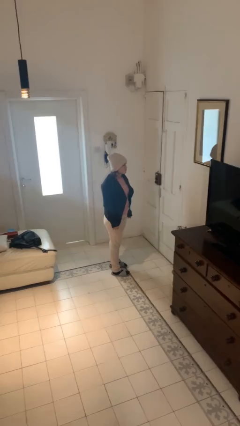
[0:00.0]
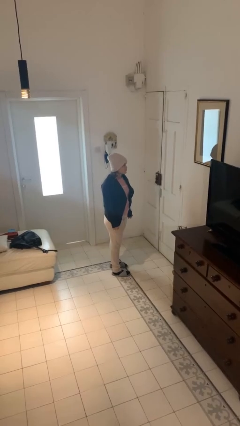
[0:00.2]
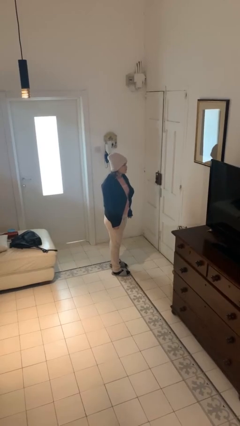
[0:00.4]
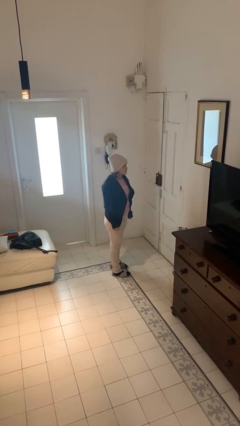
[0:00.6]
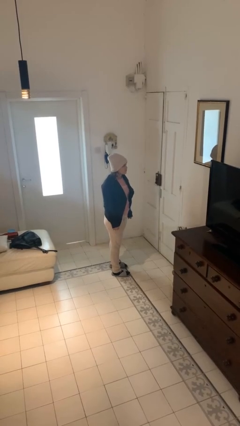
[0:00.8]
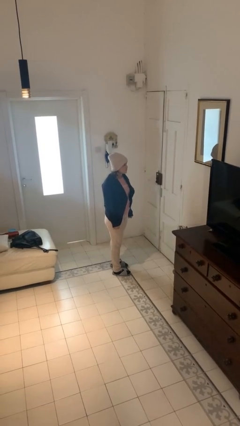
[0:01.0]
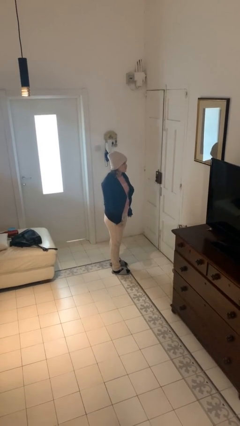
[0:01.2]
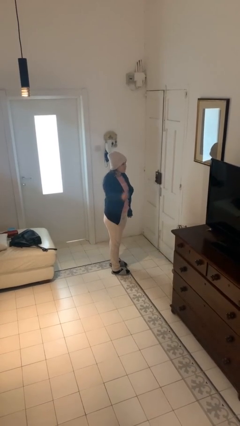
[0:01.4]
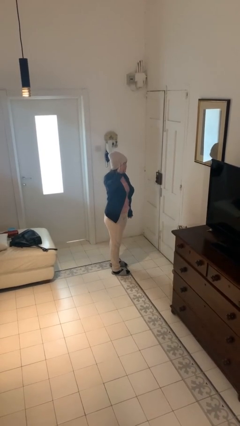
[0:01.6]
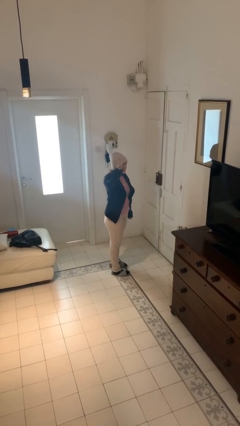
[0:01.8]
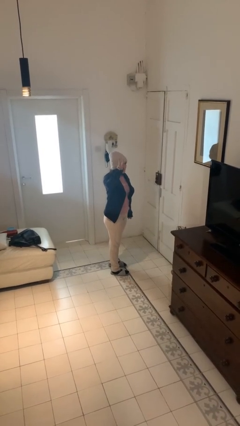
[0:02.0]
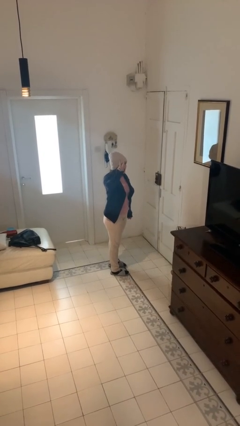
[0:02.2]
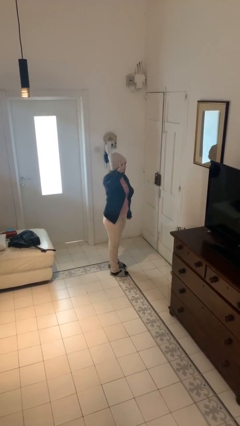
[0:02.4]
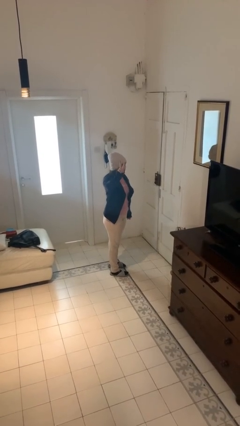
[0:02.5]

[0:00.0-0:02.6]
person gestures peace

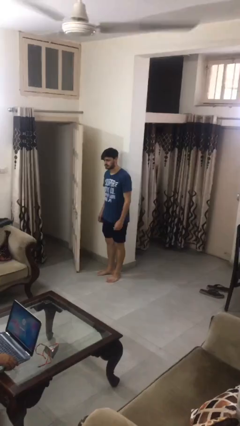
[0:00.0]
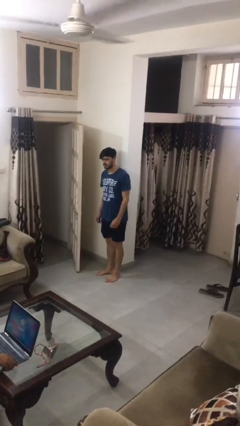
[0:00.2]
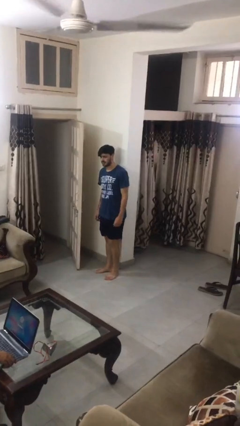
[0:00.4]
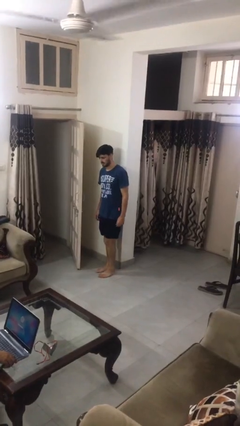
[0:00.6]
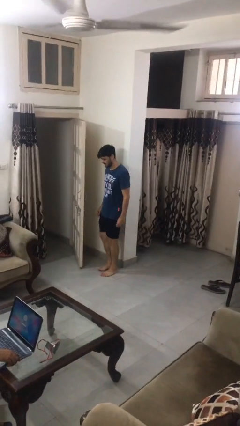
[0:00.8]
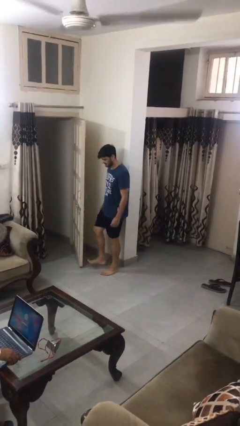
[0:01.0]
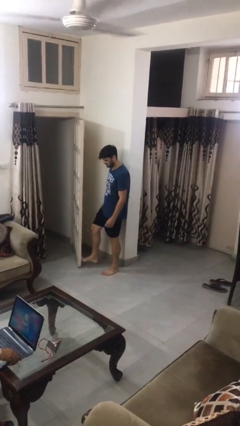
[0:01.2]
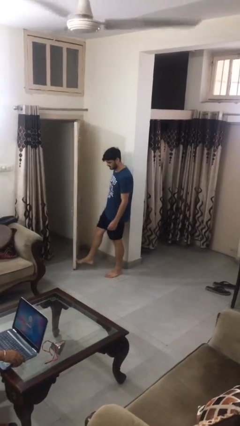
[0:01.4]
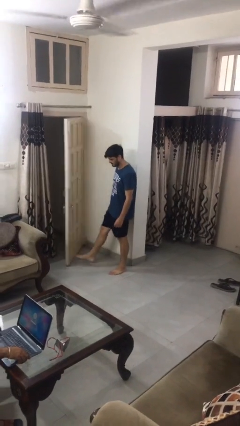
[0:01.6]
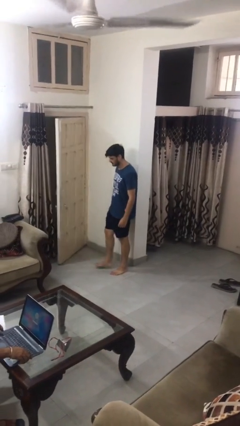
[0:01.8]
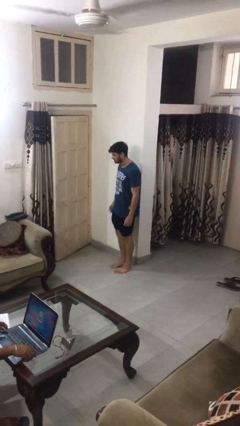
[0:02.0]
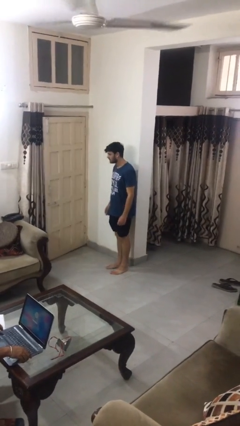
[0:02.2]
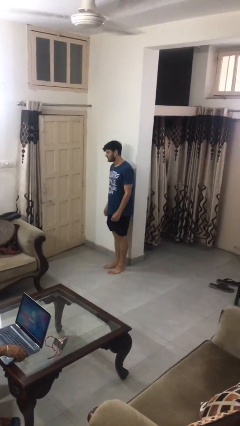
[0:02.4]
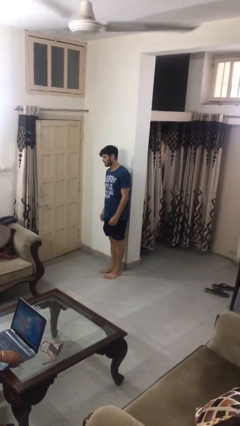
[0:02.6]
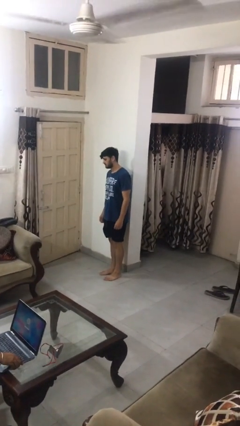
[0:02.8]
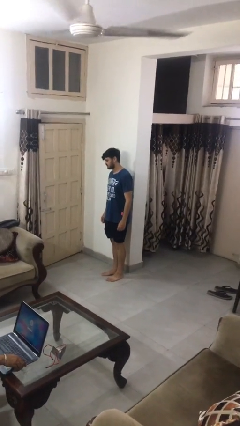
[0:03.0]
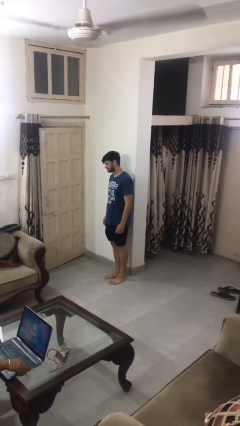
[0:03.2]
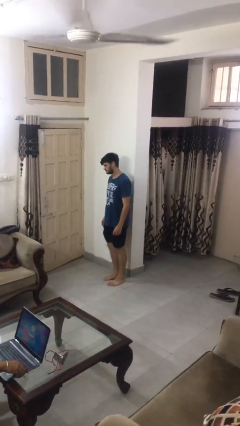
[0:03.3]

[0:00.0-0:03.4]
person closes door with foot

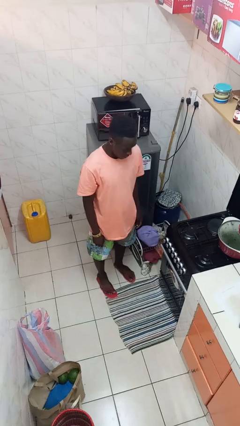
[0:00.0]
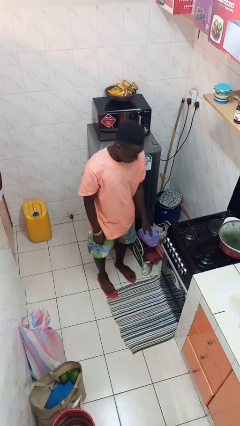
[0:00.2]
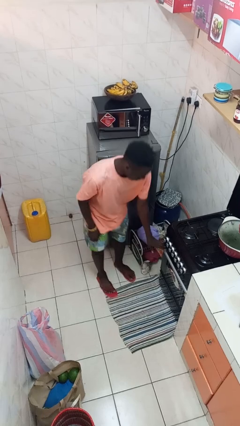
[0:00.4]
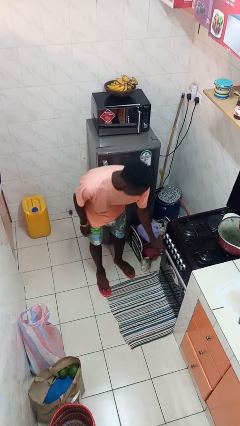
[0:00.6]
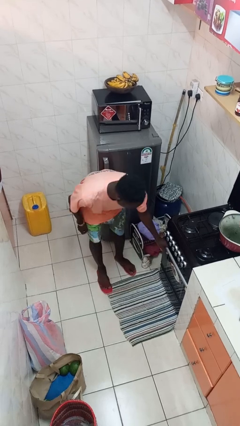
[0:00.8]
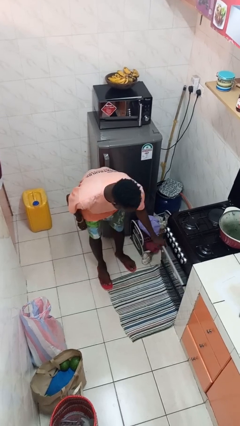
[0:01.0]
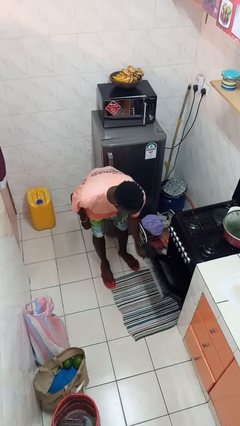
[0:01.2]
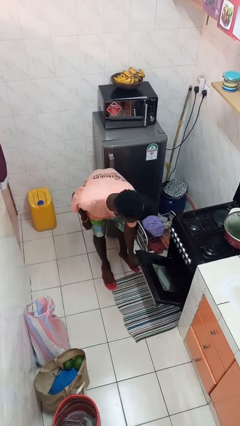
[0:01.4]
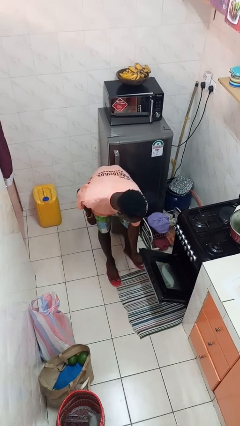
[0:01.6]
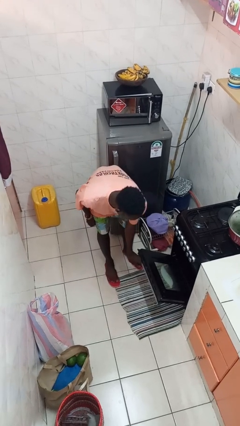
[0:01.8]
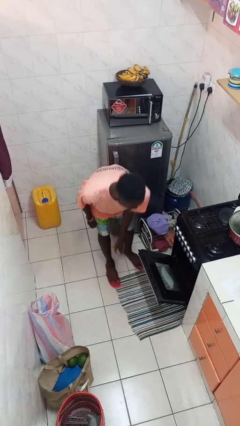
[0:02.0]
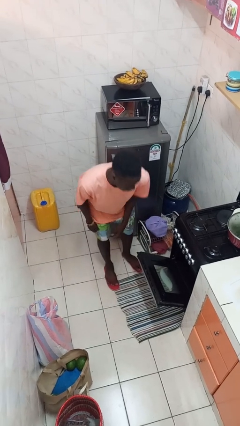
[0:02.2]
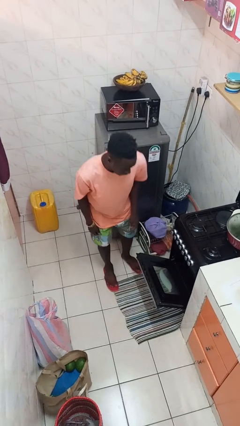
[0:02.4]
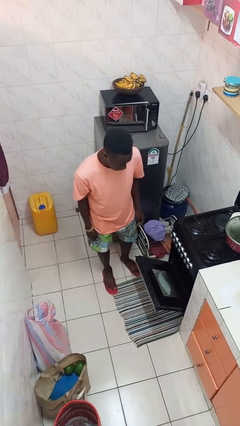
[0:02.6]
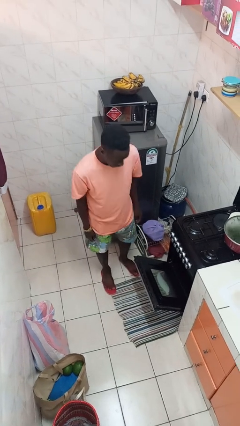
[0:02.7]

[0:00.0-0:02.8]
person opens oven door

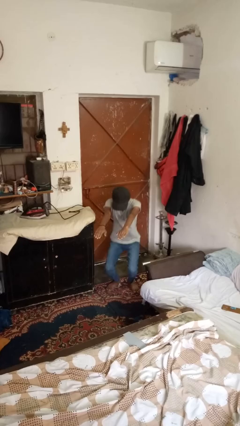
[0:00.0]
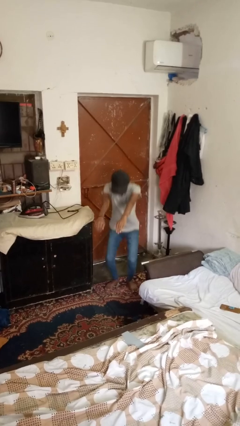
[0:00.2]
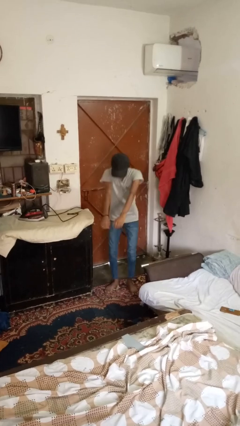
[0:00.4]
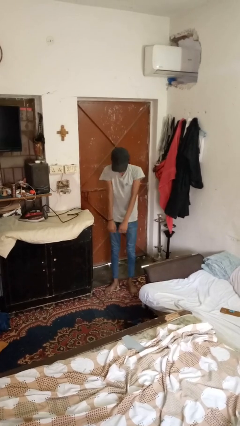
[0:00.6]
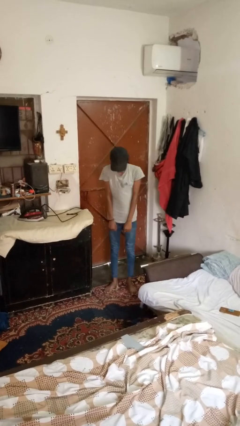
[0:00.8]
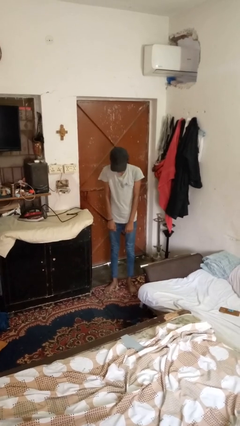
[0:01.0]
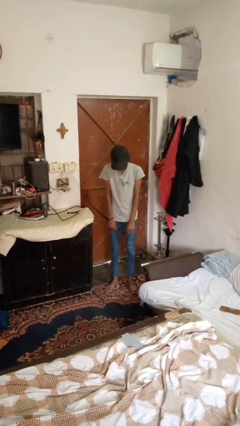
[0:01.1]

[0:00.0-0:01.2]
person stands up

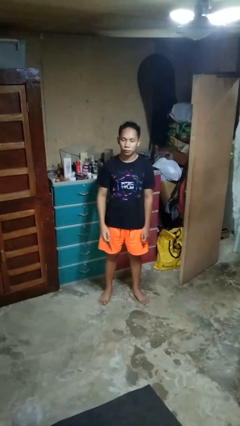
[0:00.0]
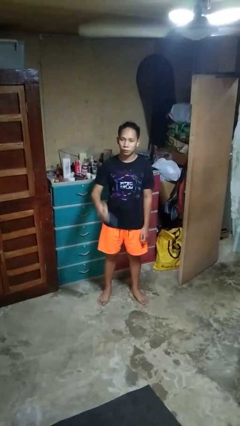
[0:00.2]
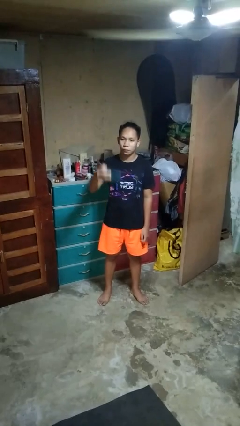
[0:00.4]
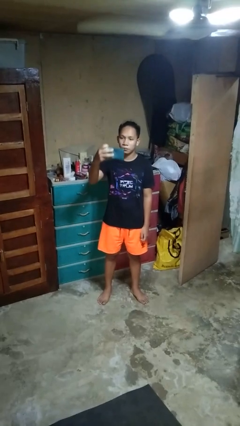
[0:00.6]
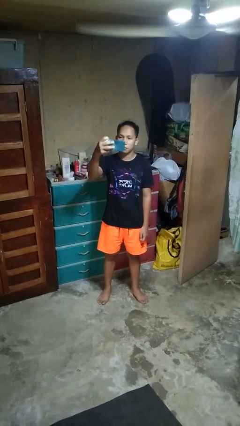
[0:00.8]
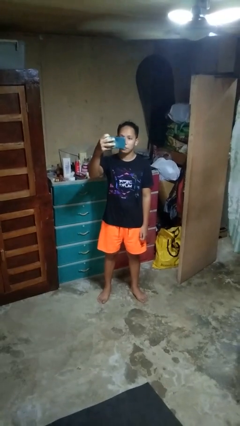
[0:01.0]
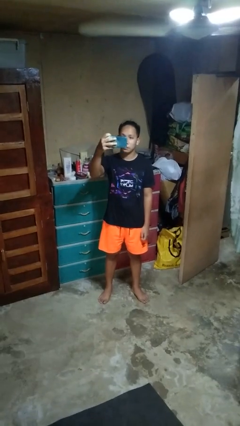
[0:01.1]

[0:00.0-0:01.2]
person takes selfie

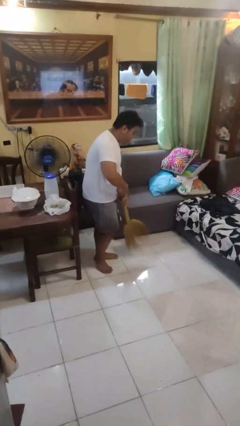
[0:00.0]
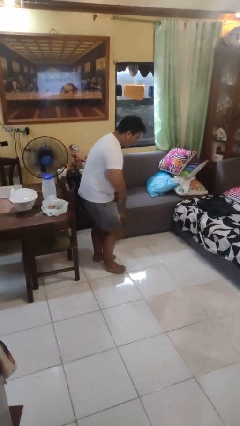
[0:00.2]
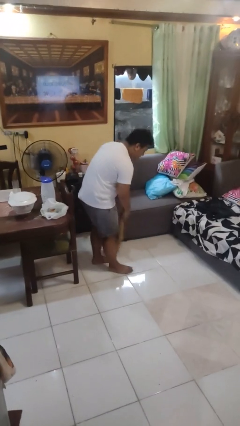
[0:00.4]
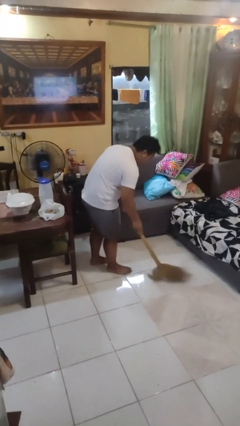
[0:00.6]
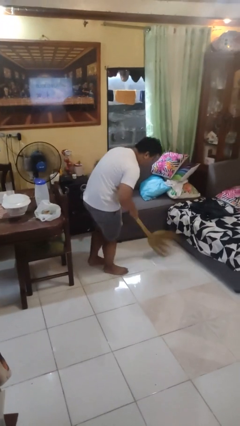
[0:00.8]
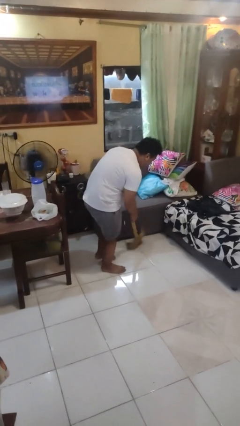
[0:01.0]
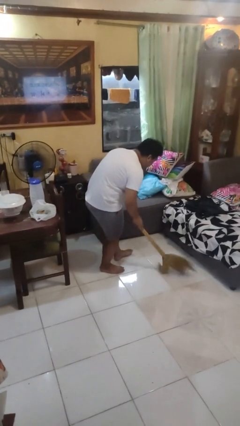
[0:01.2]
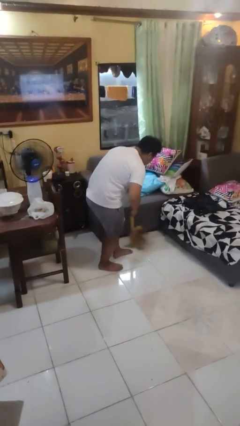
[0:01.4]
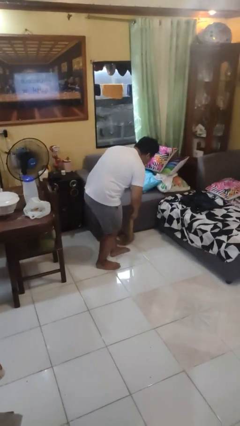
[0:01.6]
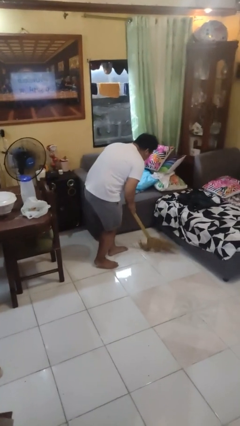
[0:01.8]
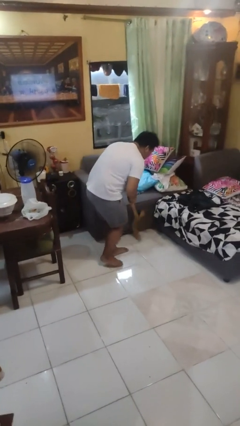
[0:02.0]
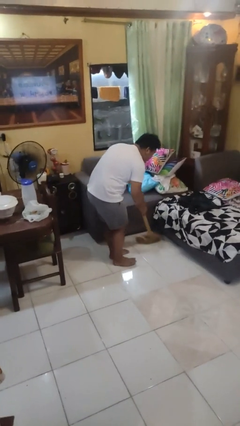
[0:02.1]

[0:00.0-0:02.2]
person sweeps floor

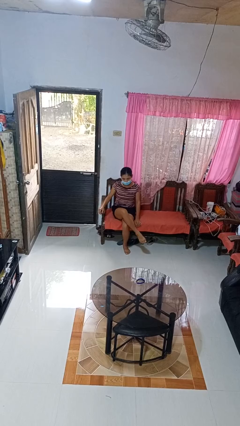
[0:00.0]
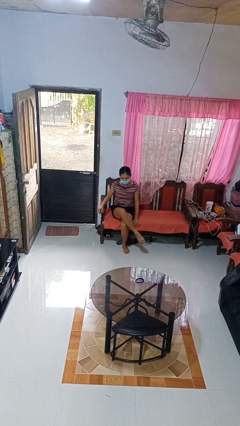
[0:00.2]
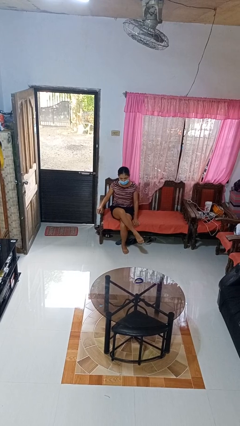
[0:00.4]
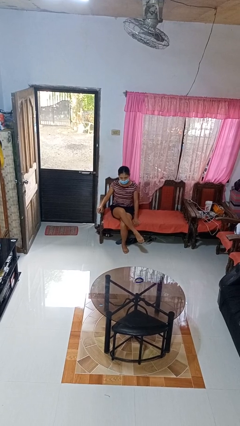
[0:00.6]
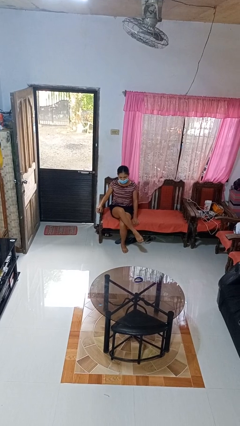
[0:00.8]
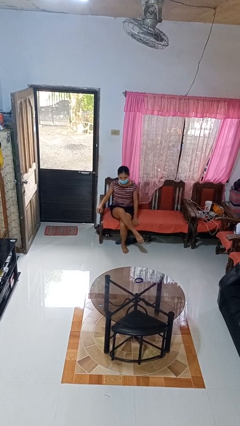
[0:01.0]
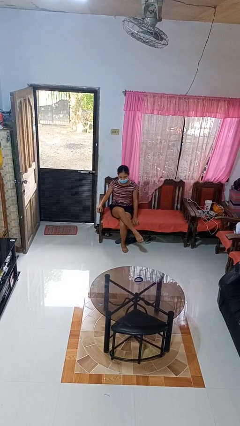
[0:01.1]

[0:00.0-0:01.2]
person crosses legs

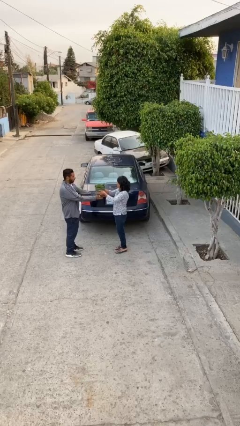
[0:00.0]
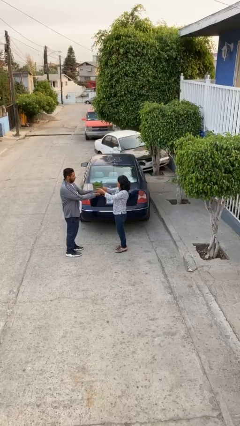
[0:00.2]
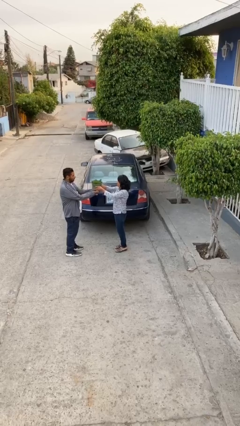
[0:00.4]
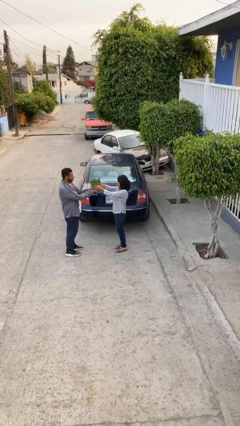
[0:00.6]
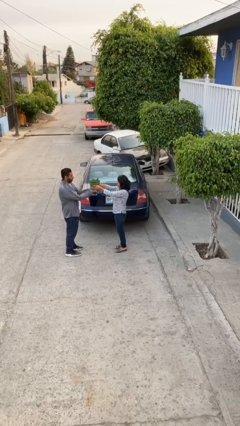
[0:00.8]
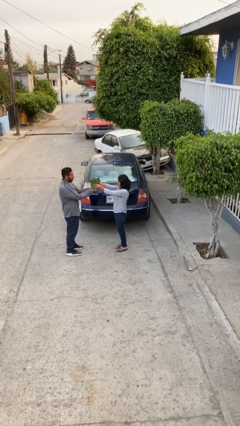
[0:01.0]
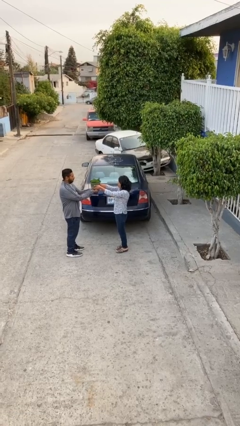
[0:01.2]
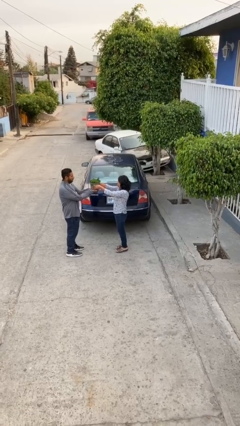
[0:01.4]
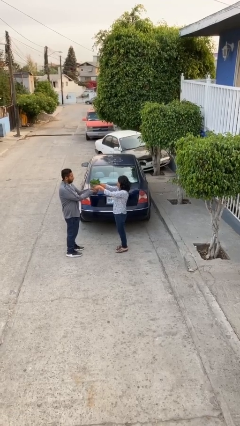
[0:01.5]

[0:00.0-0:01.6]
person transfers object to person

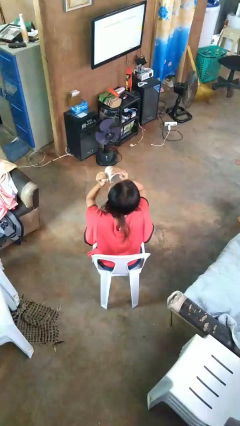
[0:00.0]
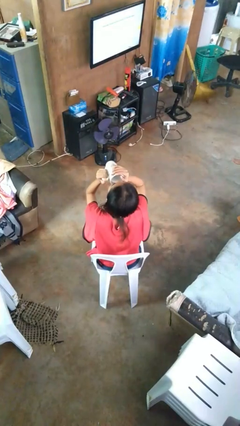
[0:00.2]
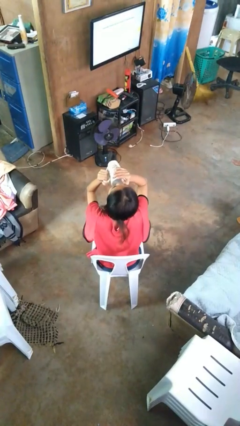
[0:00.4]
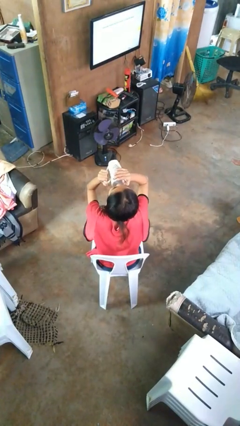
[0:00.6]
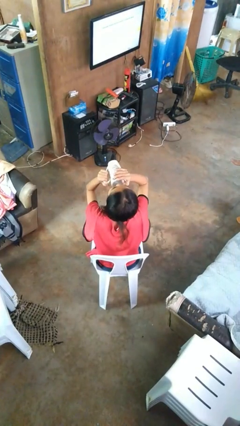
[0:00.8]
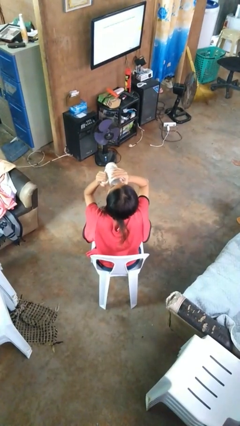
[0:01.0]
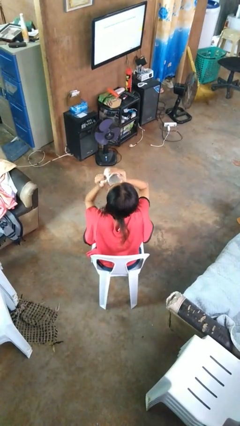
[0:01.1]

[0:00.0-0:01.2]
person drinks from mug
